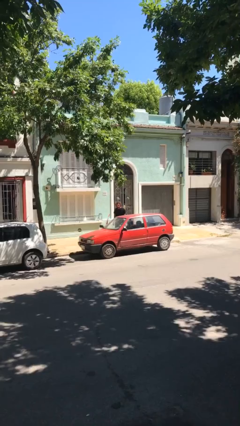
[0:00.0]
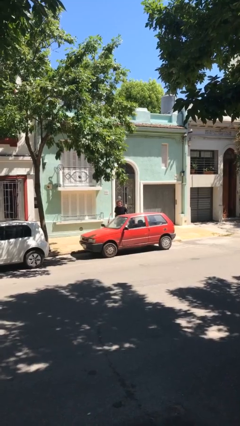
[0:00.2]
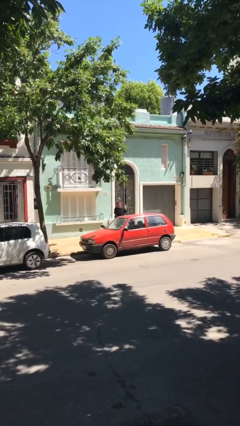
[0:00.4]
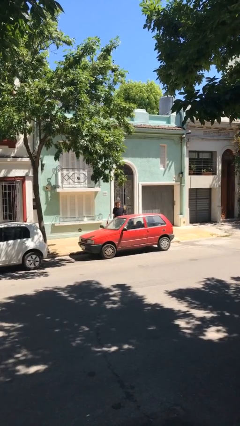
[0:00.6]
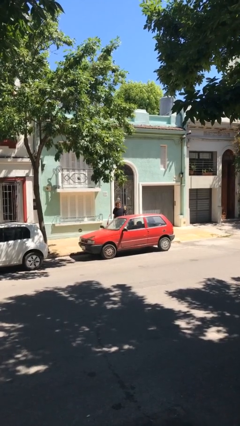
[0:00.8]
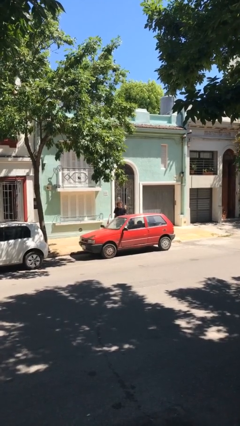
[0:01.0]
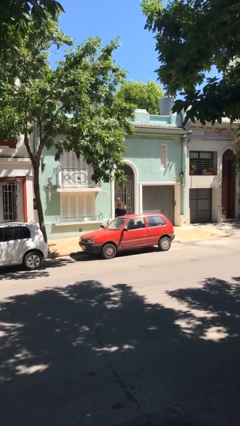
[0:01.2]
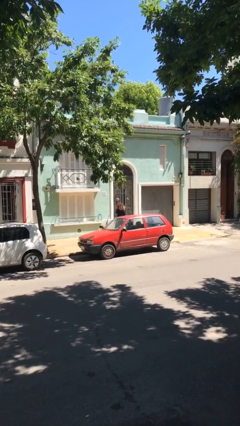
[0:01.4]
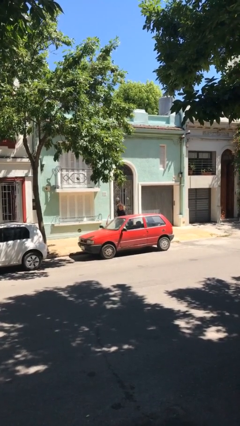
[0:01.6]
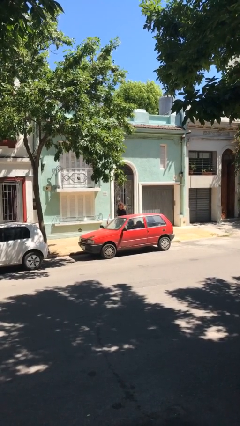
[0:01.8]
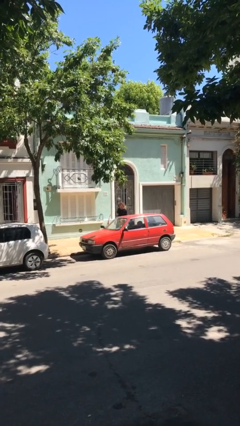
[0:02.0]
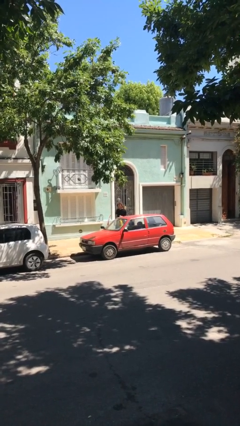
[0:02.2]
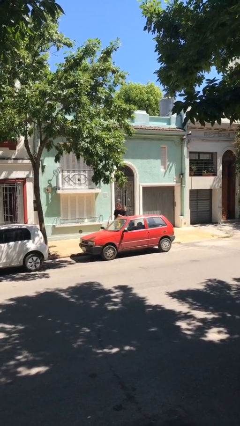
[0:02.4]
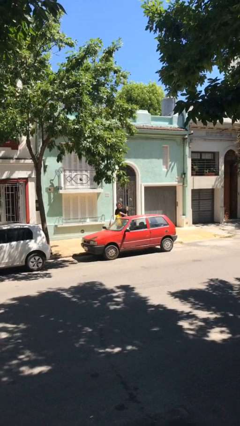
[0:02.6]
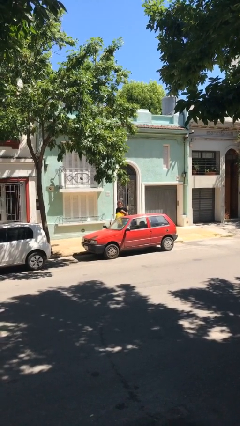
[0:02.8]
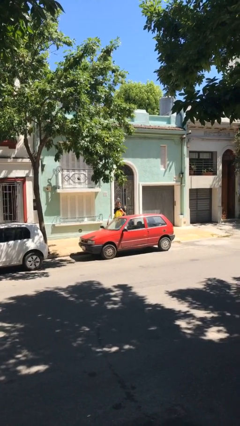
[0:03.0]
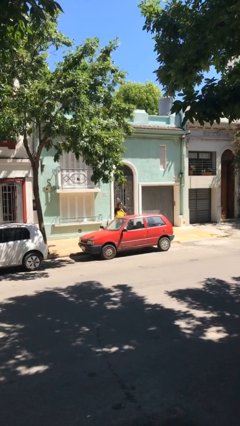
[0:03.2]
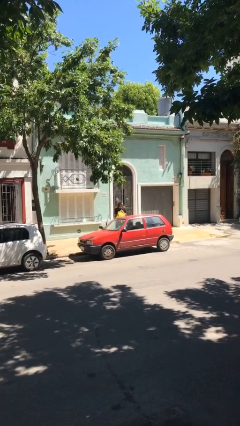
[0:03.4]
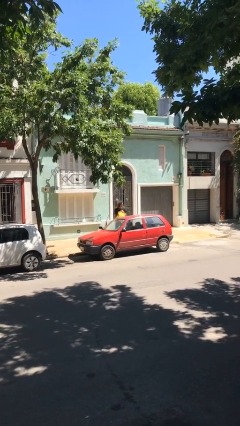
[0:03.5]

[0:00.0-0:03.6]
person unloads car

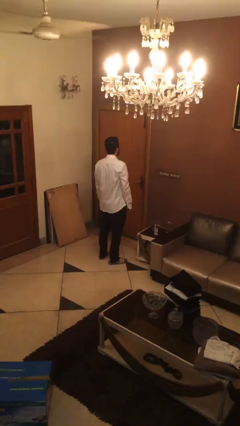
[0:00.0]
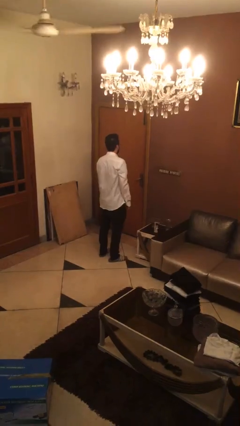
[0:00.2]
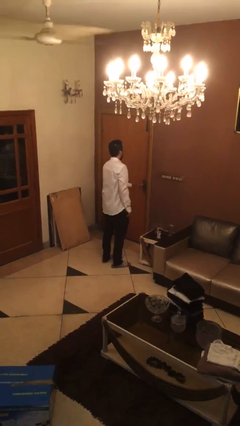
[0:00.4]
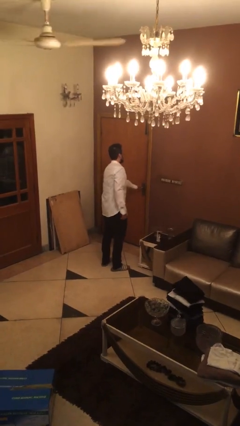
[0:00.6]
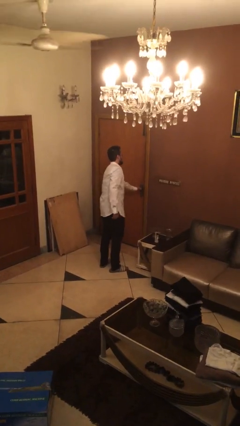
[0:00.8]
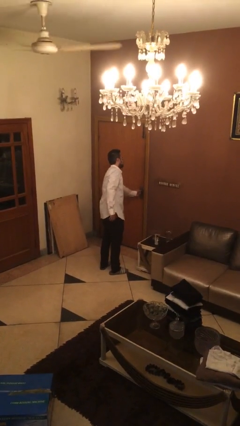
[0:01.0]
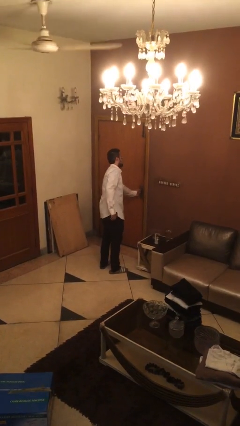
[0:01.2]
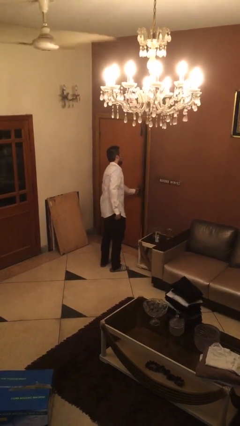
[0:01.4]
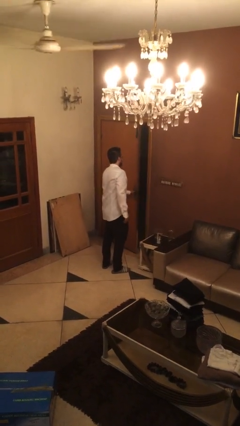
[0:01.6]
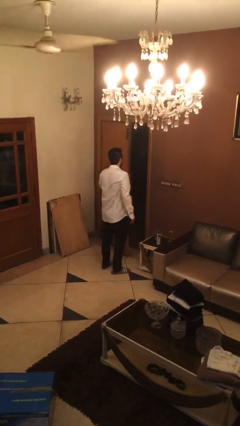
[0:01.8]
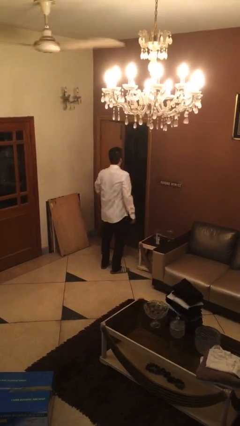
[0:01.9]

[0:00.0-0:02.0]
person opens facility door

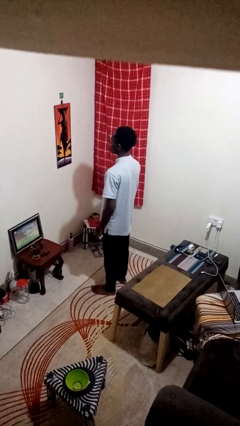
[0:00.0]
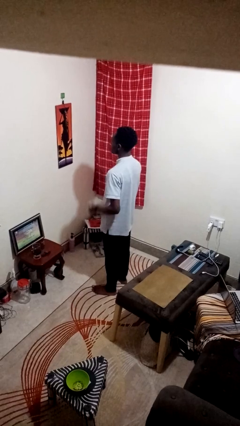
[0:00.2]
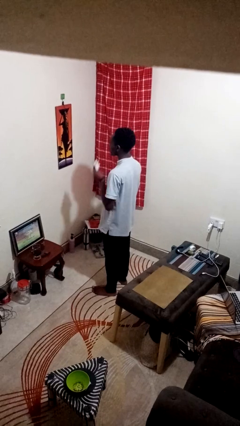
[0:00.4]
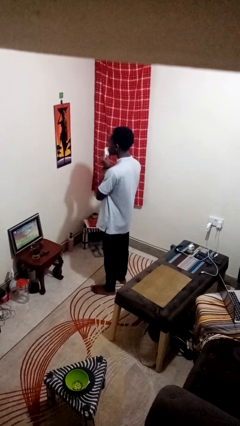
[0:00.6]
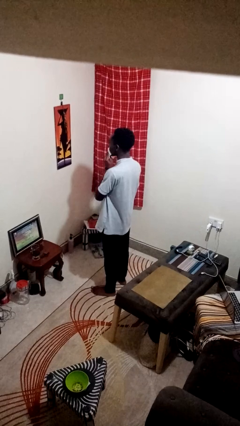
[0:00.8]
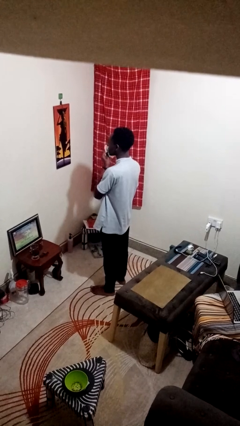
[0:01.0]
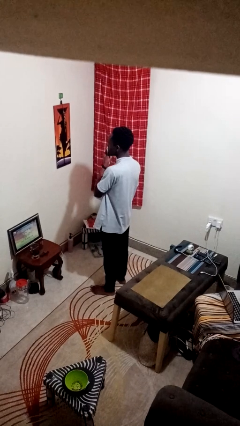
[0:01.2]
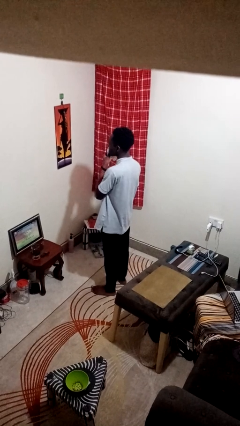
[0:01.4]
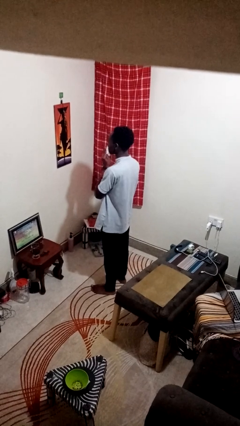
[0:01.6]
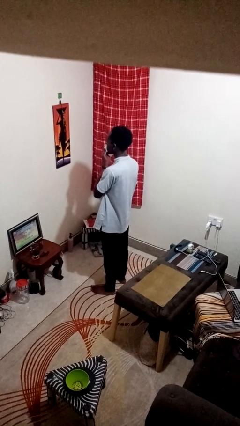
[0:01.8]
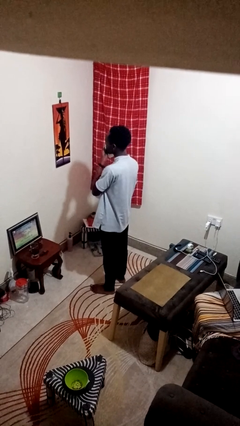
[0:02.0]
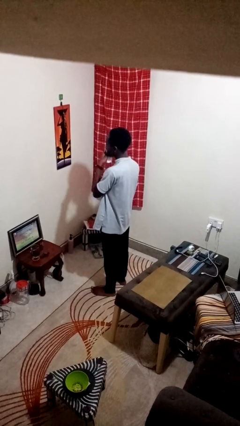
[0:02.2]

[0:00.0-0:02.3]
person wipes mouth with napkin

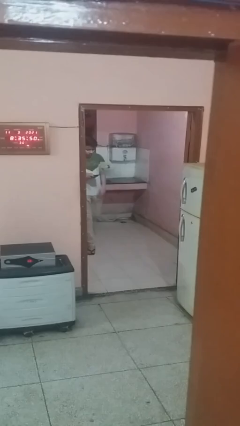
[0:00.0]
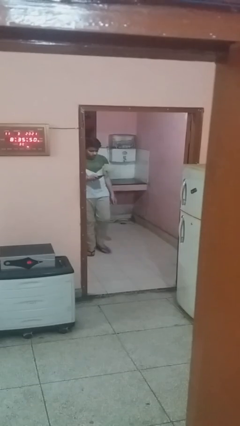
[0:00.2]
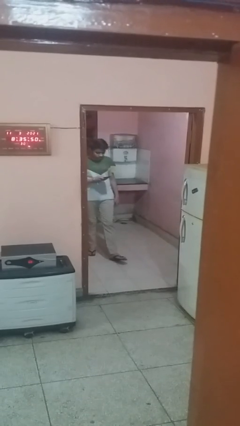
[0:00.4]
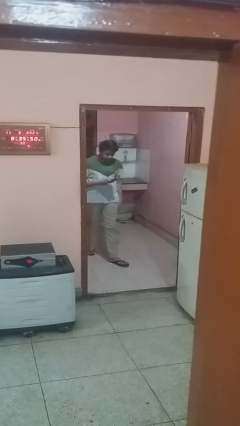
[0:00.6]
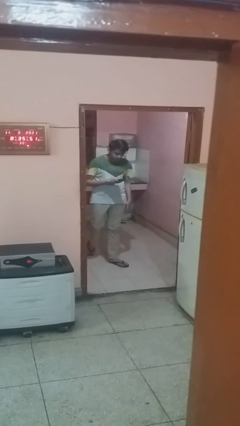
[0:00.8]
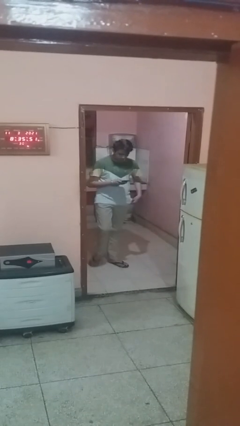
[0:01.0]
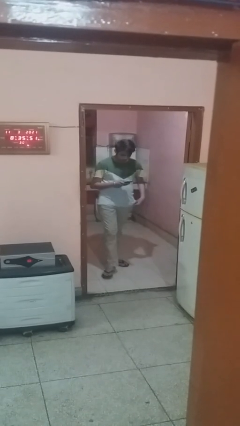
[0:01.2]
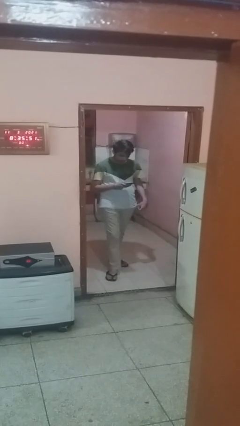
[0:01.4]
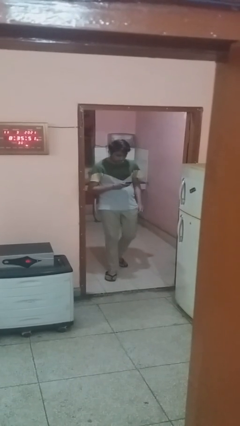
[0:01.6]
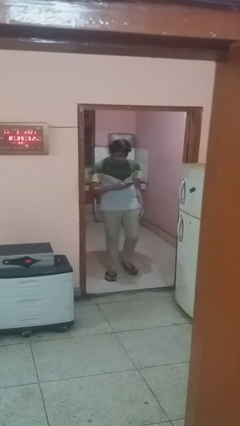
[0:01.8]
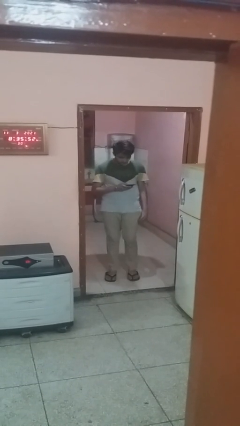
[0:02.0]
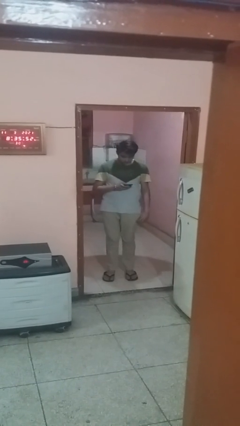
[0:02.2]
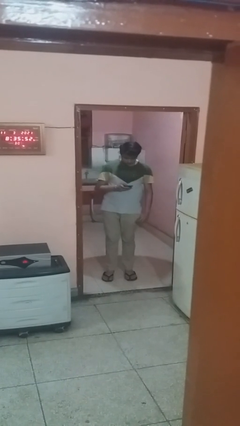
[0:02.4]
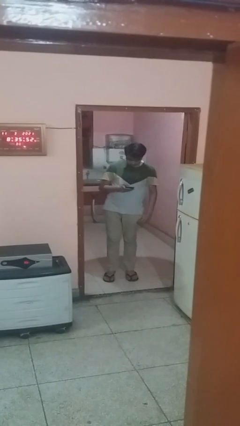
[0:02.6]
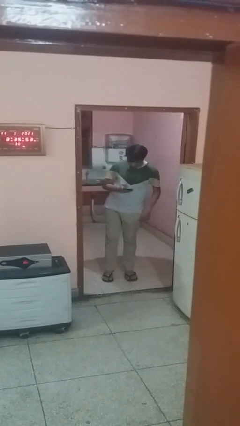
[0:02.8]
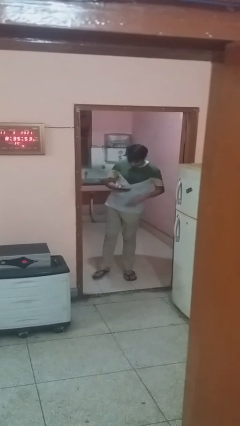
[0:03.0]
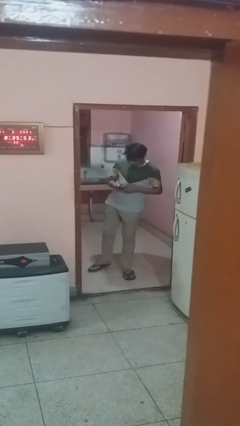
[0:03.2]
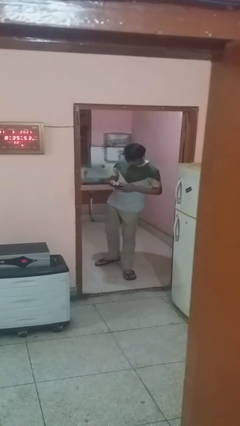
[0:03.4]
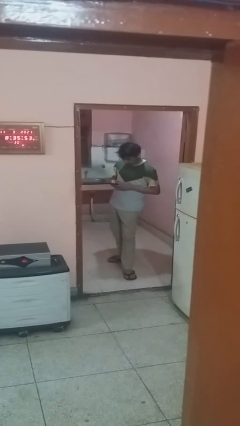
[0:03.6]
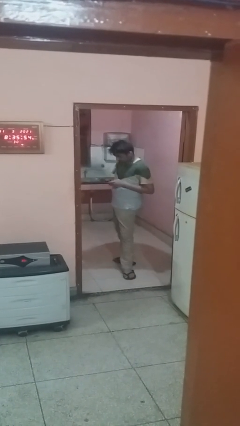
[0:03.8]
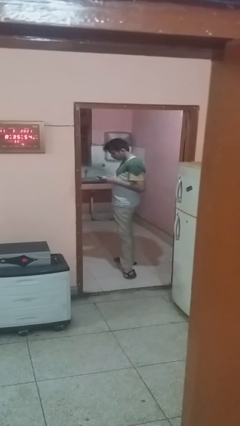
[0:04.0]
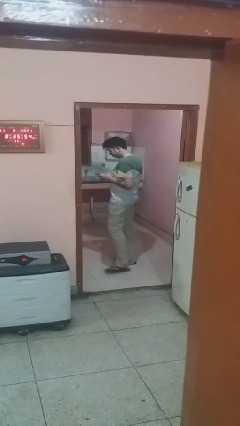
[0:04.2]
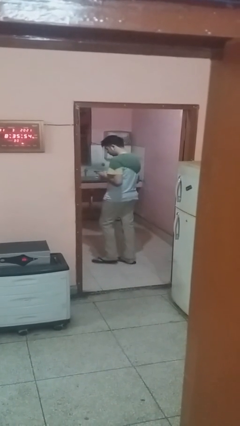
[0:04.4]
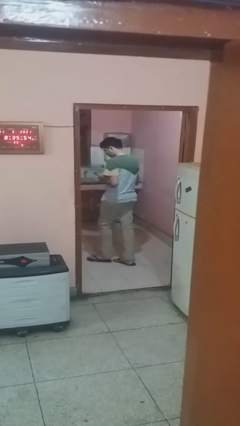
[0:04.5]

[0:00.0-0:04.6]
person enters scene through structure

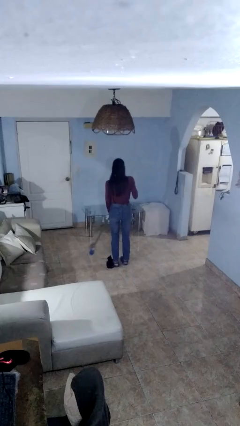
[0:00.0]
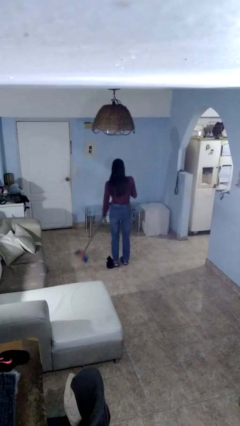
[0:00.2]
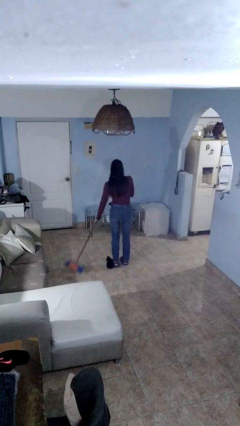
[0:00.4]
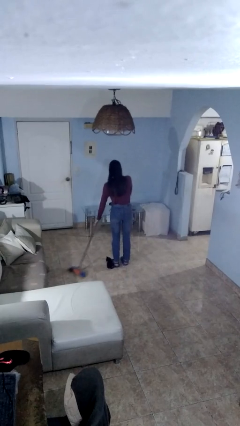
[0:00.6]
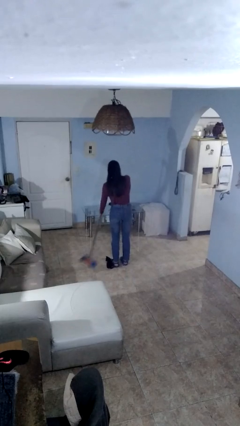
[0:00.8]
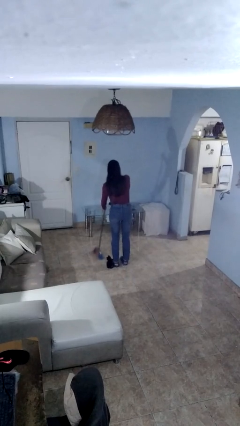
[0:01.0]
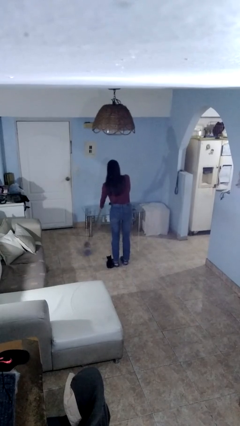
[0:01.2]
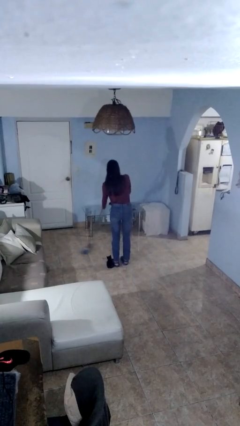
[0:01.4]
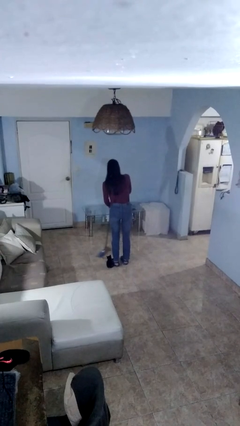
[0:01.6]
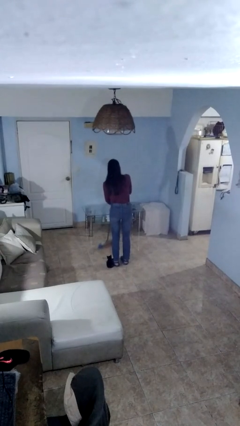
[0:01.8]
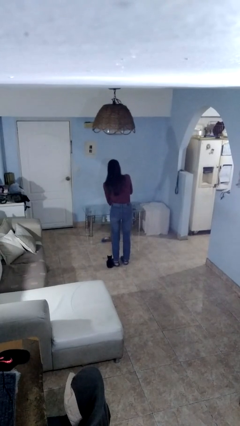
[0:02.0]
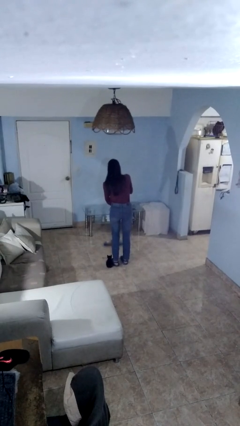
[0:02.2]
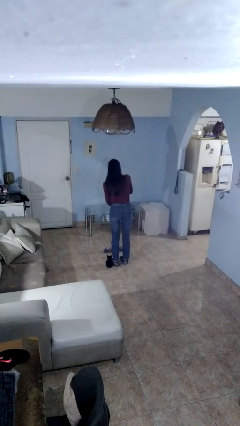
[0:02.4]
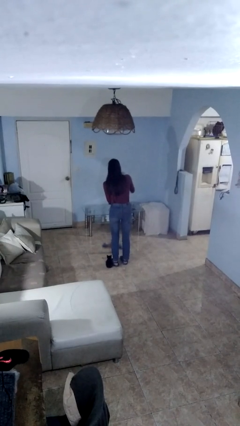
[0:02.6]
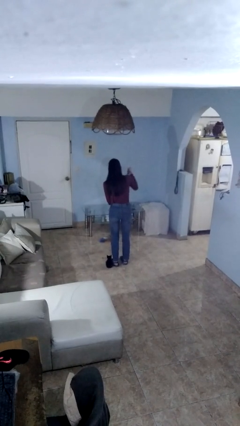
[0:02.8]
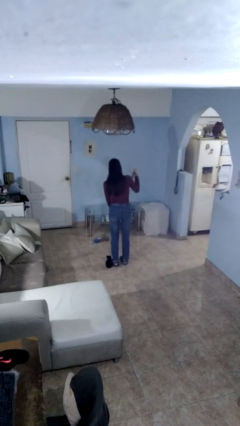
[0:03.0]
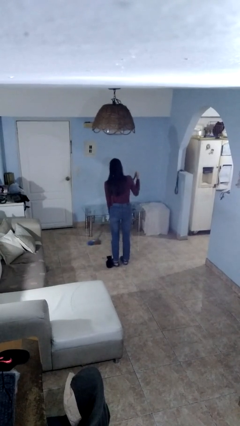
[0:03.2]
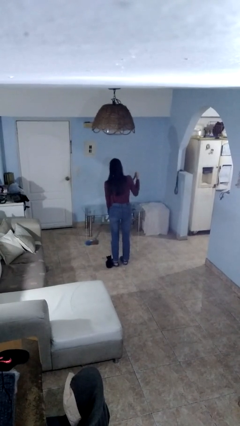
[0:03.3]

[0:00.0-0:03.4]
person sweeps floor

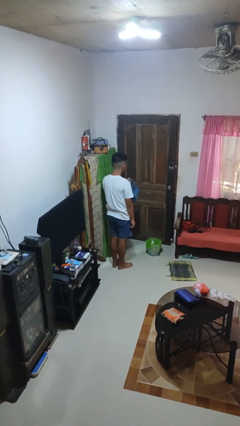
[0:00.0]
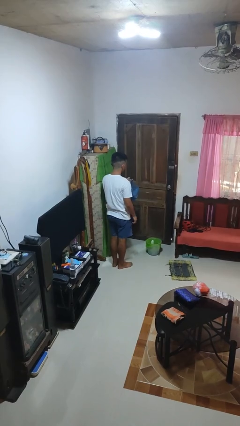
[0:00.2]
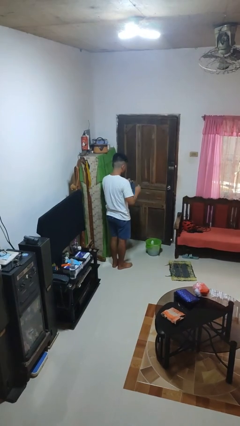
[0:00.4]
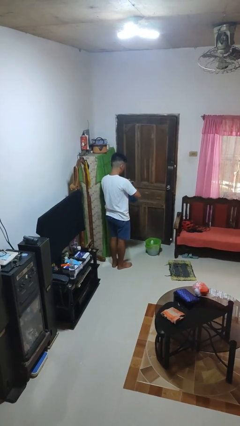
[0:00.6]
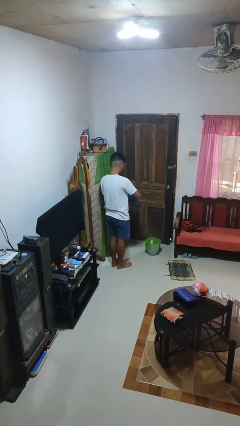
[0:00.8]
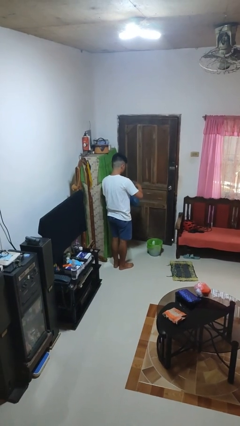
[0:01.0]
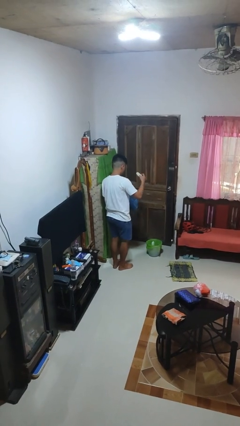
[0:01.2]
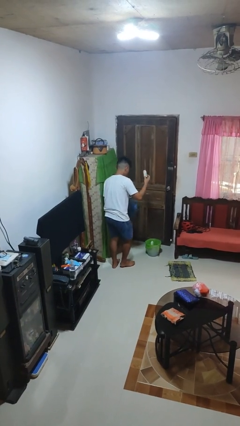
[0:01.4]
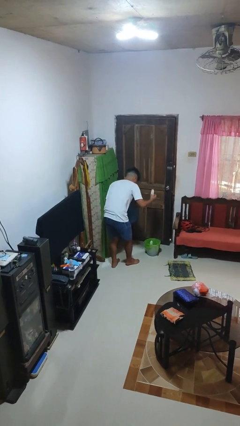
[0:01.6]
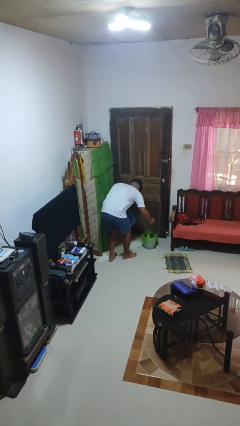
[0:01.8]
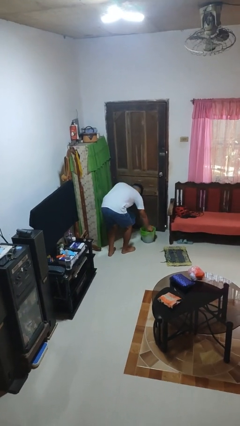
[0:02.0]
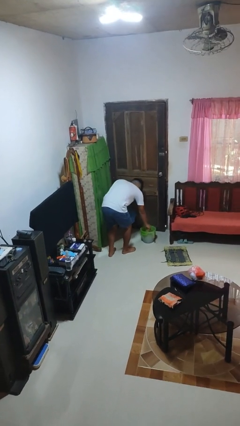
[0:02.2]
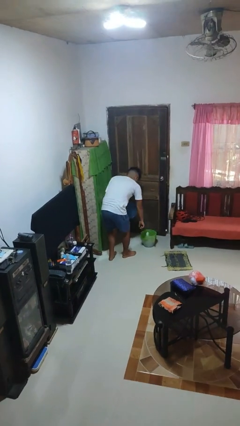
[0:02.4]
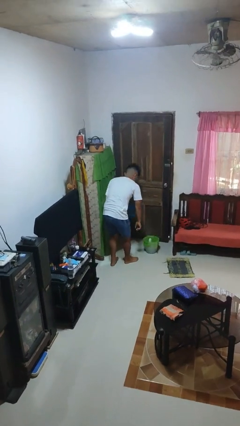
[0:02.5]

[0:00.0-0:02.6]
person discards trash
